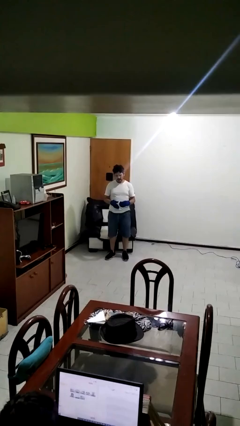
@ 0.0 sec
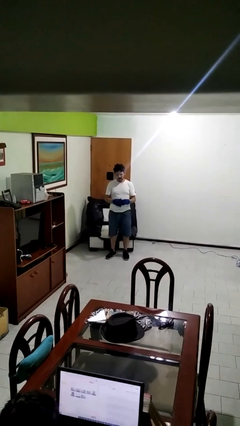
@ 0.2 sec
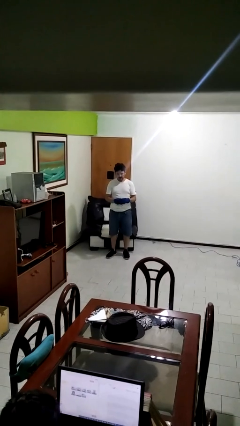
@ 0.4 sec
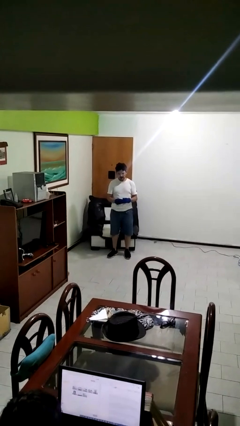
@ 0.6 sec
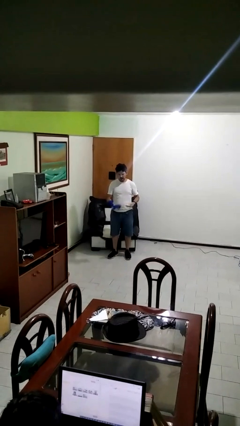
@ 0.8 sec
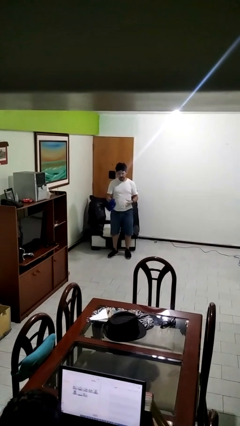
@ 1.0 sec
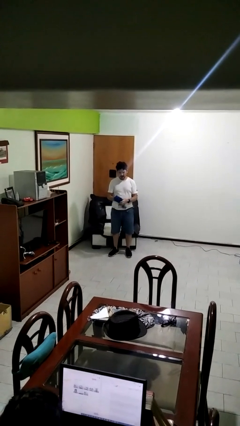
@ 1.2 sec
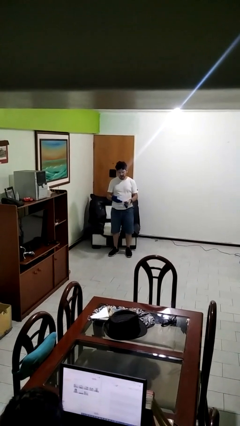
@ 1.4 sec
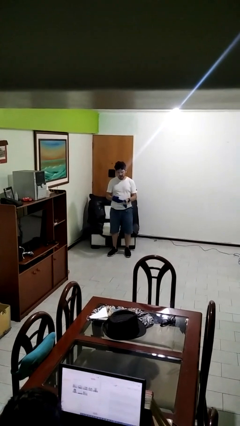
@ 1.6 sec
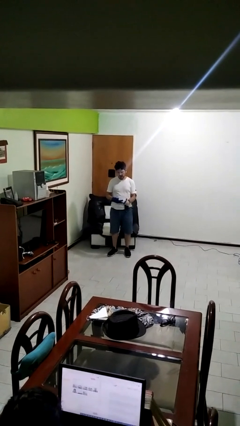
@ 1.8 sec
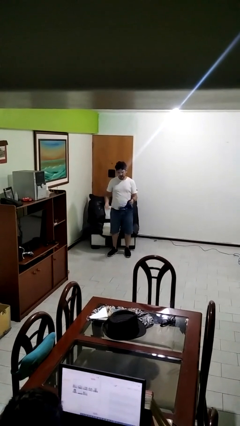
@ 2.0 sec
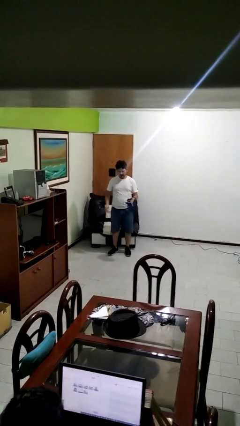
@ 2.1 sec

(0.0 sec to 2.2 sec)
person takes off gloves

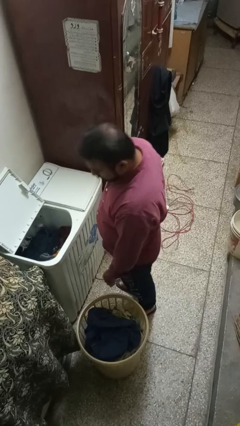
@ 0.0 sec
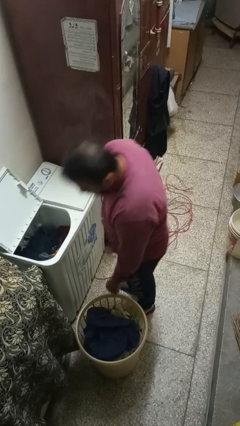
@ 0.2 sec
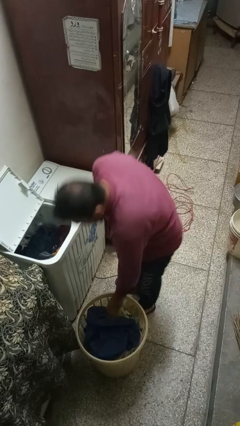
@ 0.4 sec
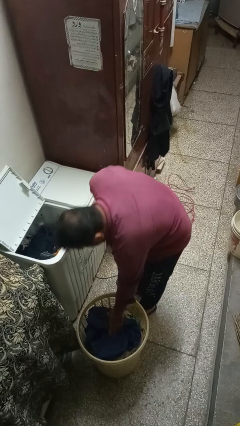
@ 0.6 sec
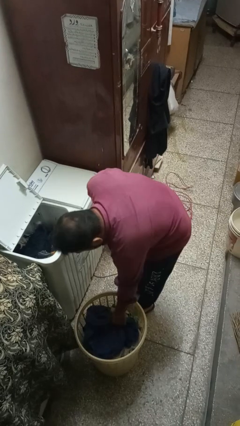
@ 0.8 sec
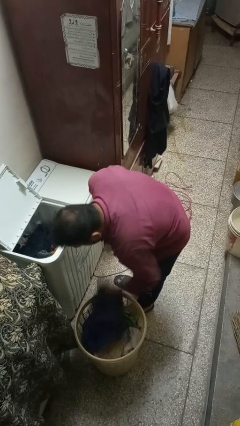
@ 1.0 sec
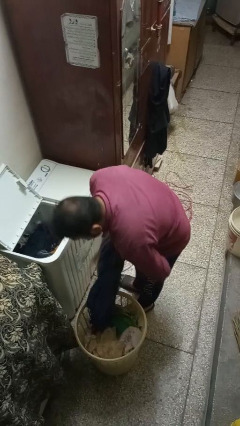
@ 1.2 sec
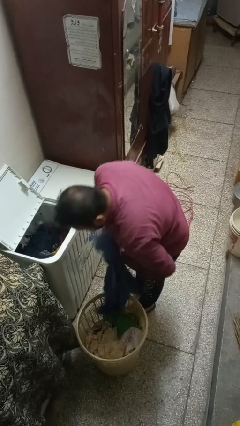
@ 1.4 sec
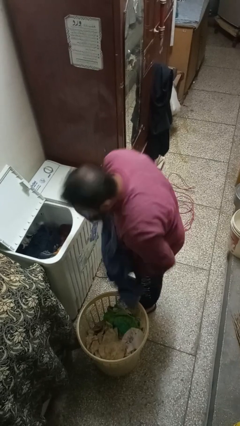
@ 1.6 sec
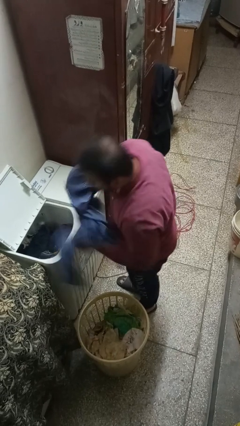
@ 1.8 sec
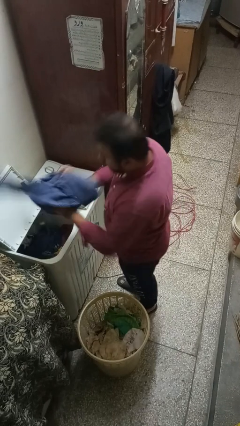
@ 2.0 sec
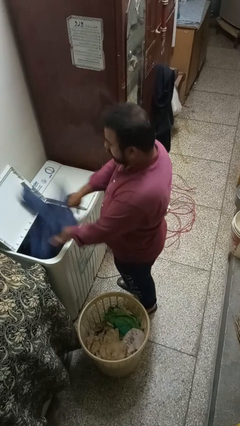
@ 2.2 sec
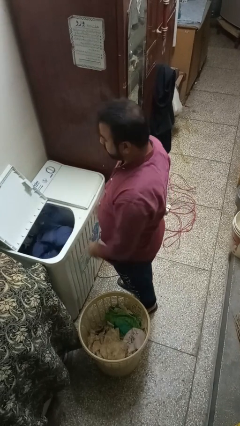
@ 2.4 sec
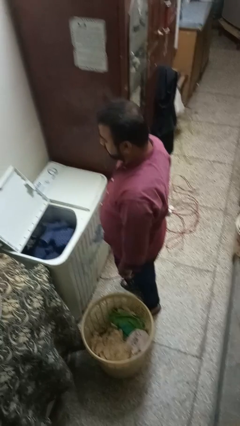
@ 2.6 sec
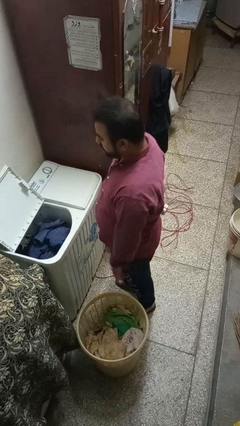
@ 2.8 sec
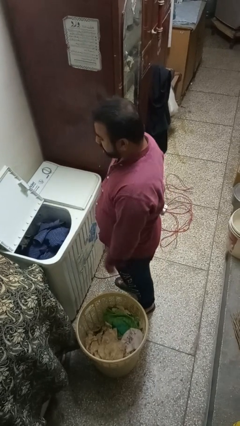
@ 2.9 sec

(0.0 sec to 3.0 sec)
person loads clotheswasher

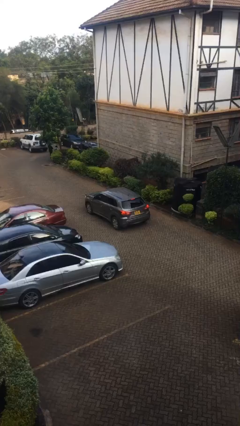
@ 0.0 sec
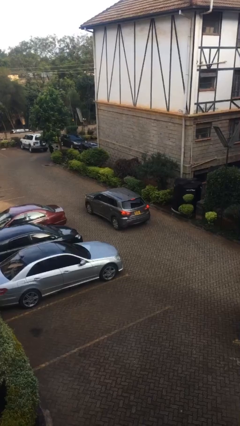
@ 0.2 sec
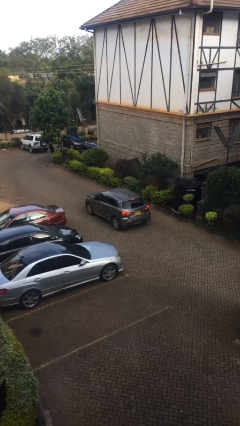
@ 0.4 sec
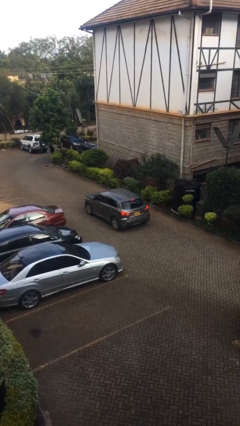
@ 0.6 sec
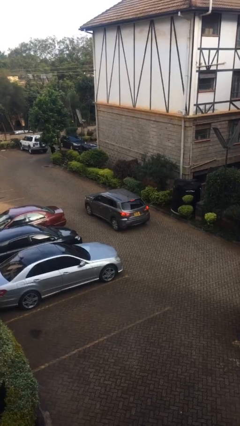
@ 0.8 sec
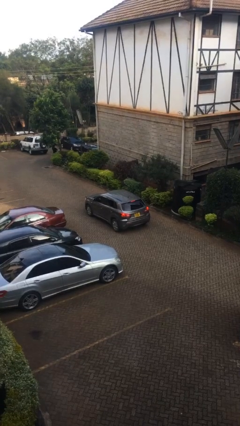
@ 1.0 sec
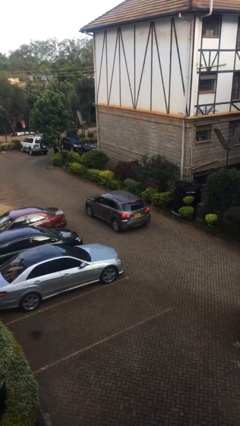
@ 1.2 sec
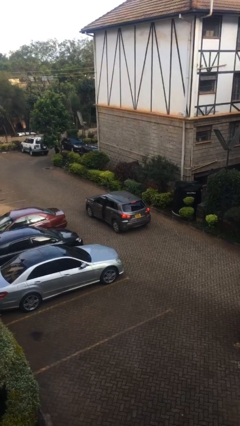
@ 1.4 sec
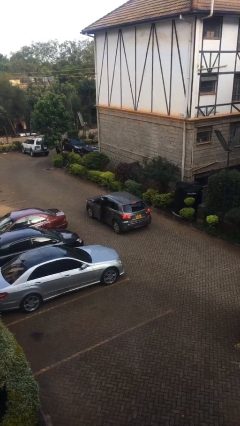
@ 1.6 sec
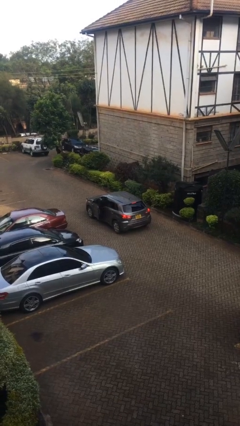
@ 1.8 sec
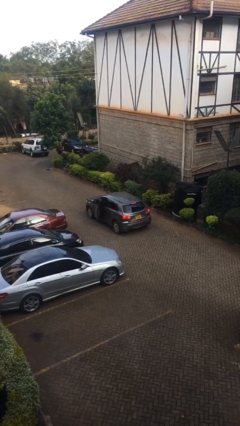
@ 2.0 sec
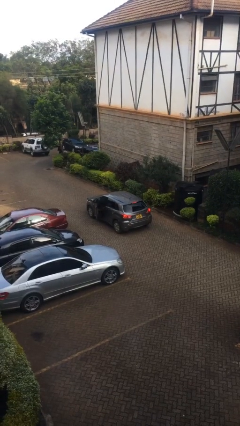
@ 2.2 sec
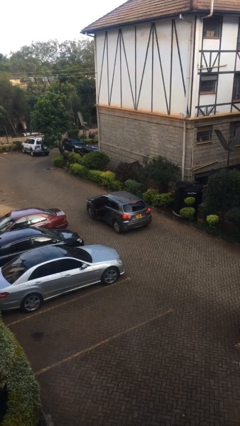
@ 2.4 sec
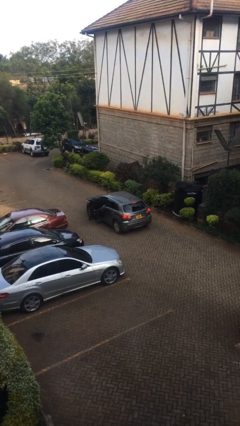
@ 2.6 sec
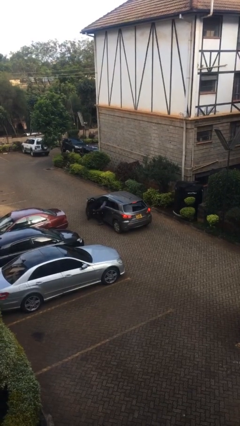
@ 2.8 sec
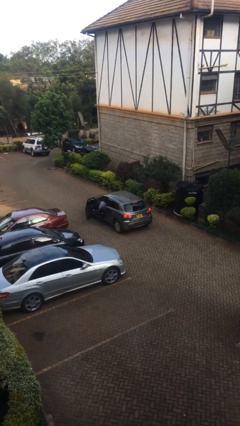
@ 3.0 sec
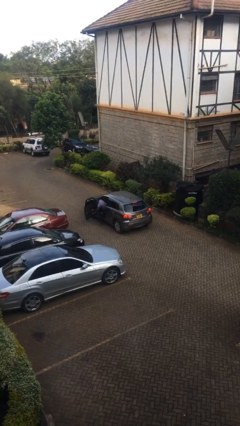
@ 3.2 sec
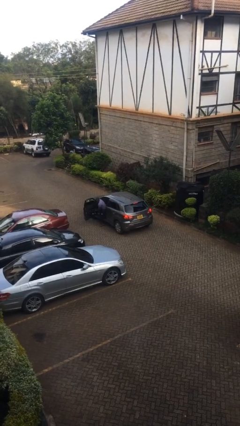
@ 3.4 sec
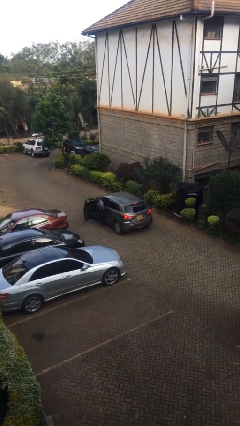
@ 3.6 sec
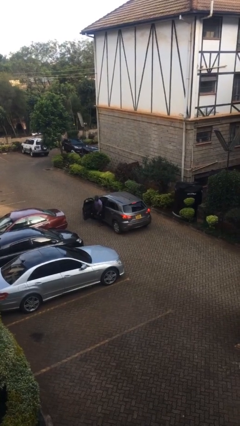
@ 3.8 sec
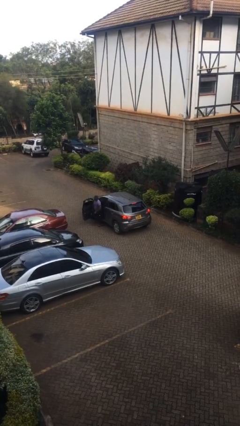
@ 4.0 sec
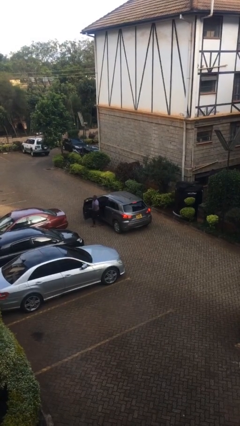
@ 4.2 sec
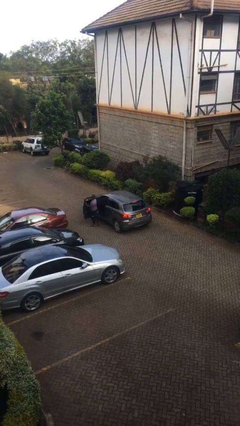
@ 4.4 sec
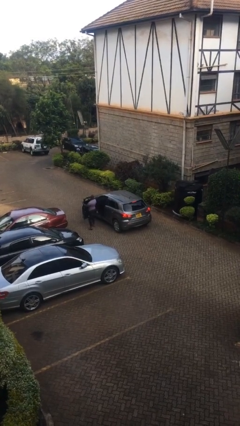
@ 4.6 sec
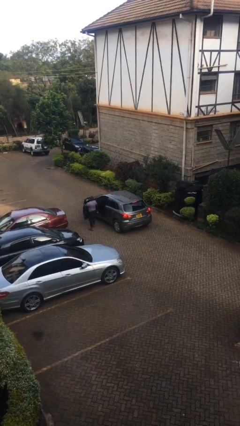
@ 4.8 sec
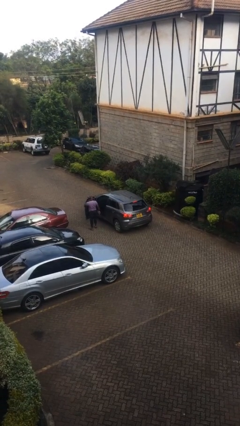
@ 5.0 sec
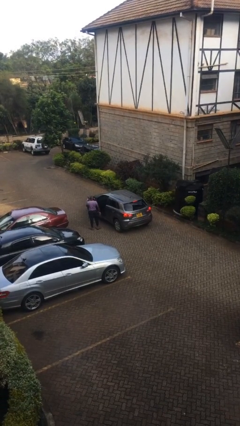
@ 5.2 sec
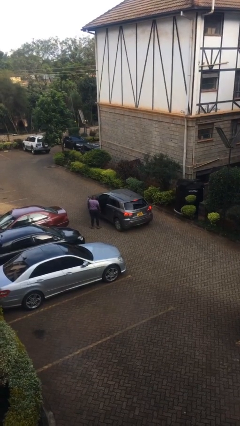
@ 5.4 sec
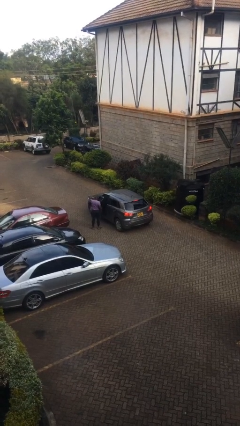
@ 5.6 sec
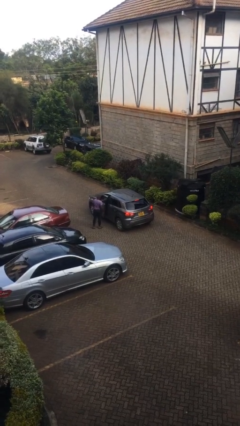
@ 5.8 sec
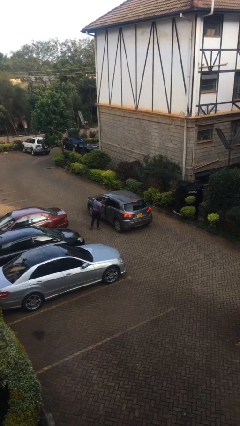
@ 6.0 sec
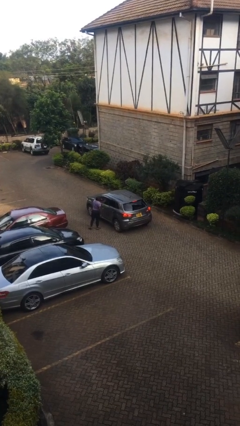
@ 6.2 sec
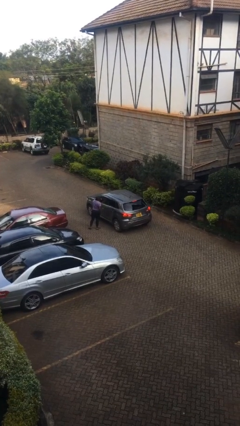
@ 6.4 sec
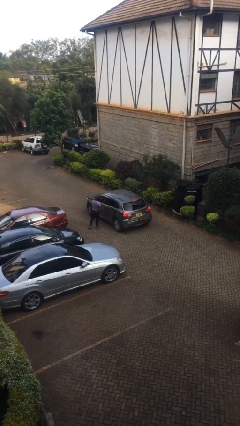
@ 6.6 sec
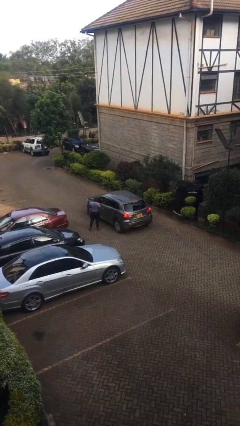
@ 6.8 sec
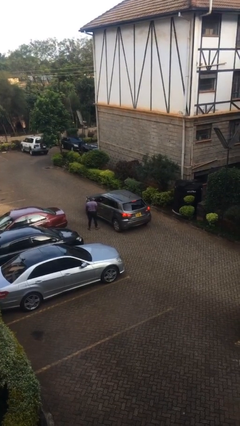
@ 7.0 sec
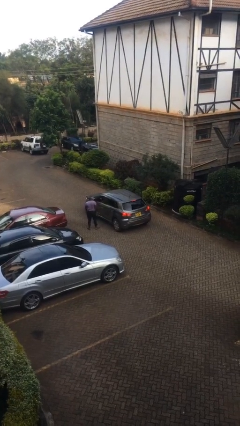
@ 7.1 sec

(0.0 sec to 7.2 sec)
car drops off person

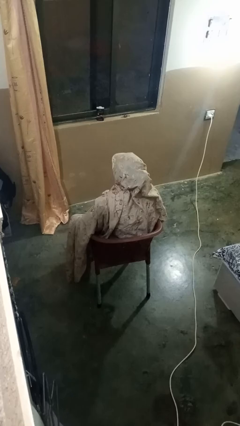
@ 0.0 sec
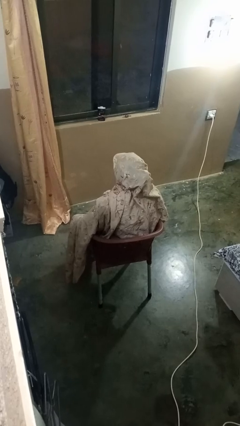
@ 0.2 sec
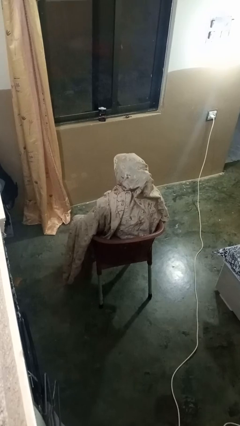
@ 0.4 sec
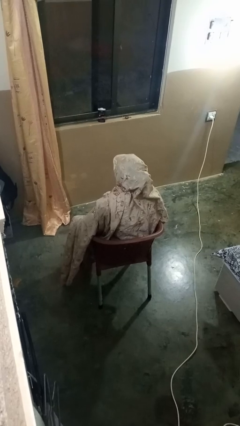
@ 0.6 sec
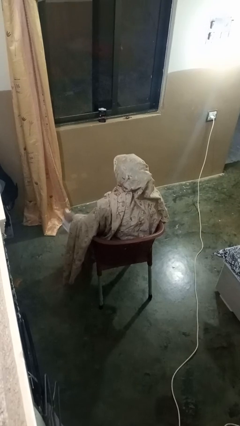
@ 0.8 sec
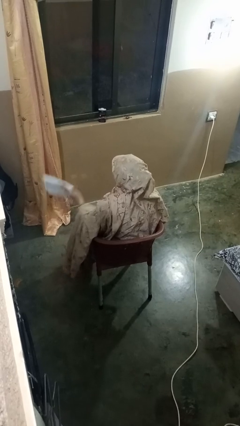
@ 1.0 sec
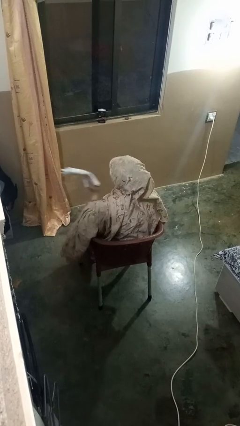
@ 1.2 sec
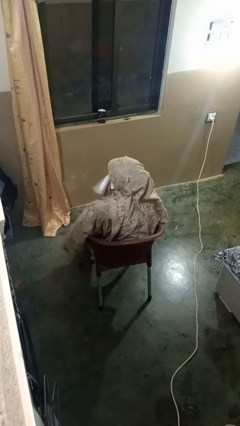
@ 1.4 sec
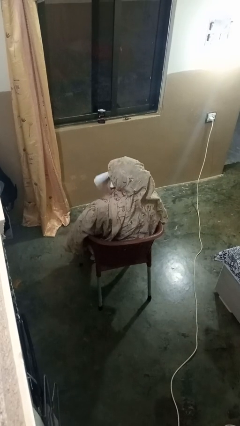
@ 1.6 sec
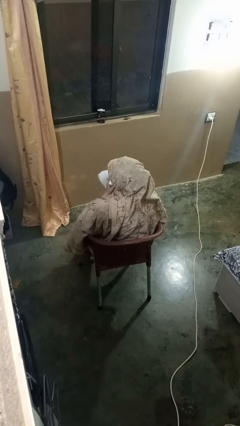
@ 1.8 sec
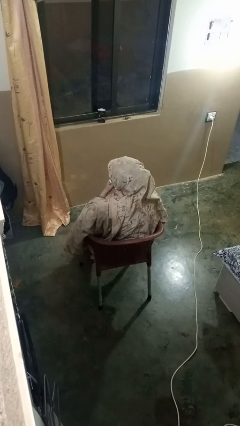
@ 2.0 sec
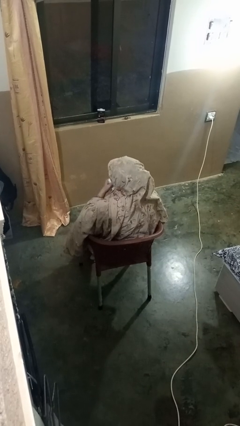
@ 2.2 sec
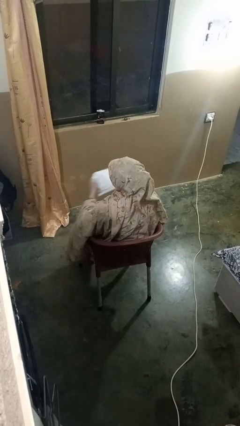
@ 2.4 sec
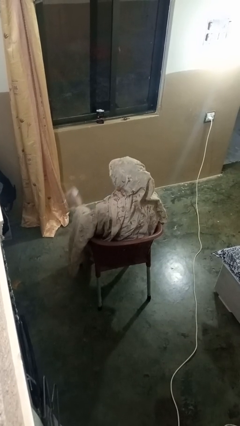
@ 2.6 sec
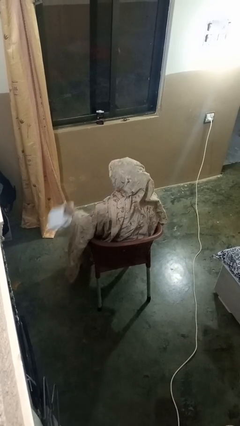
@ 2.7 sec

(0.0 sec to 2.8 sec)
person wipes mouth with napkin

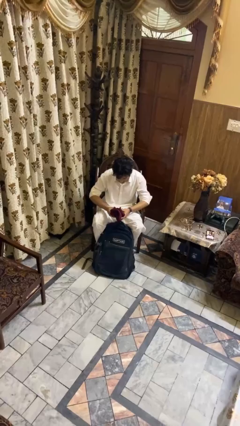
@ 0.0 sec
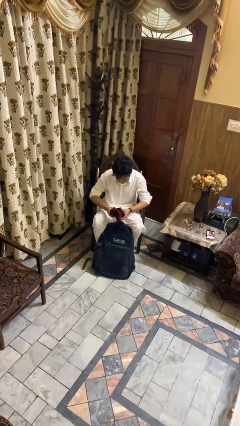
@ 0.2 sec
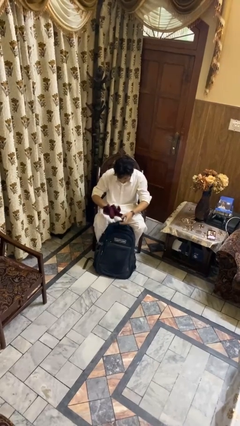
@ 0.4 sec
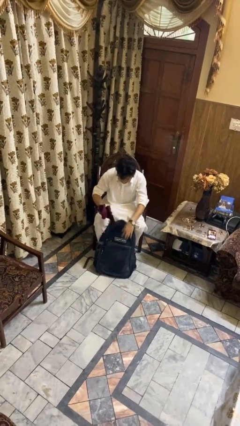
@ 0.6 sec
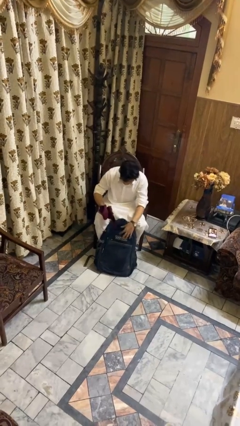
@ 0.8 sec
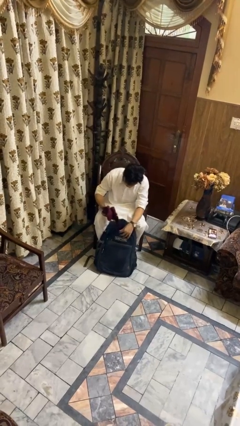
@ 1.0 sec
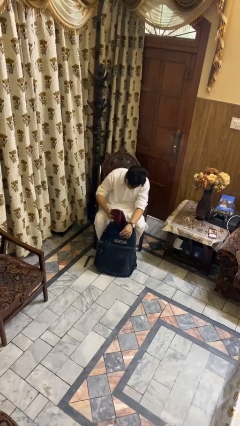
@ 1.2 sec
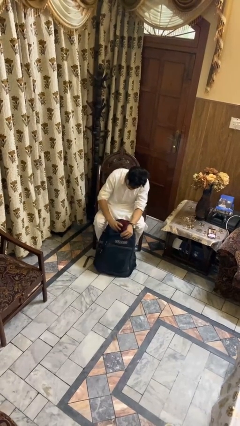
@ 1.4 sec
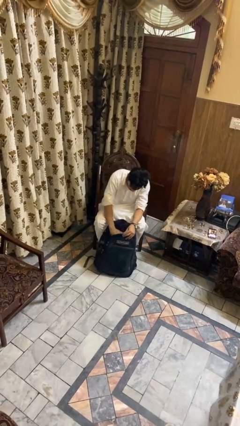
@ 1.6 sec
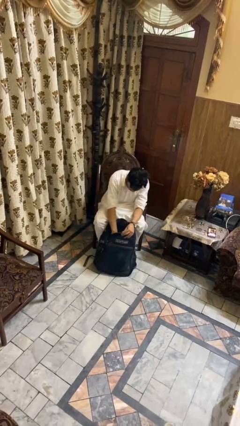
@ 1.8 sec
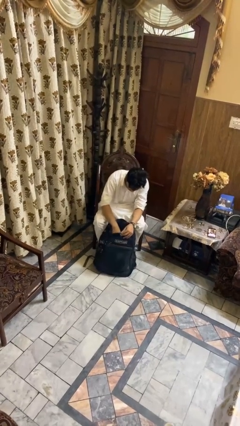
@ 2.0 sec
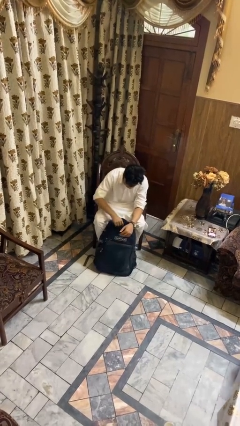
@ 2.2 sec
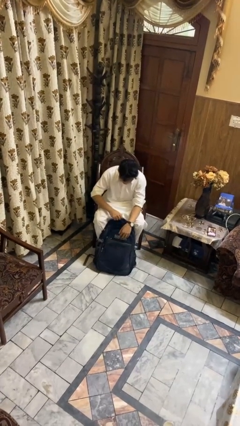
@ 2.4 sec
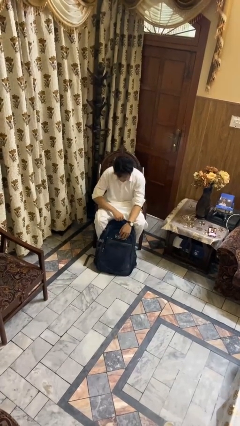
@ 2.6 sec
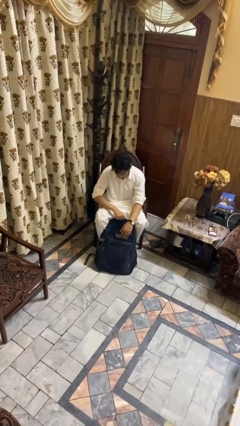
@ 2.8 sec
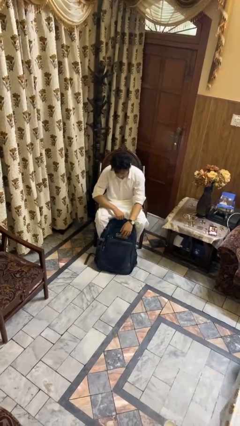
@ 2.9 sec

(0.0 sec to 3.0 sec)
person puts object into backpack
